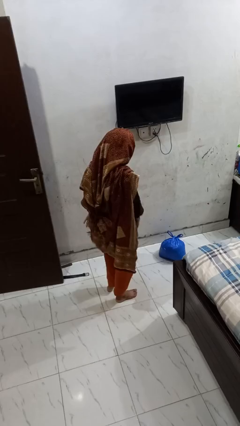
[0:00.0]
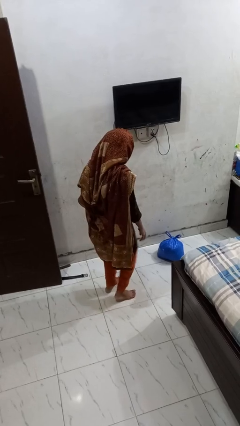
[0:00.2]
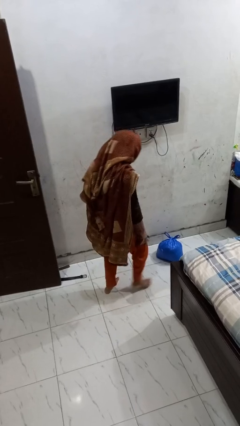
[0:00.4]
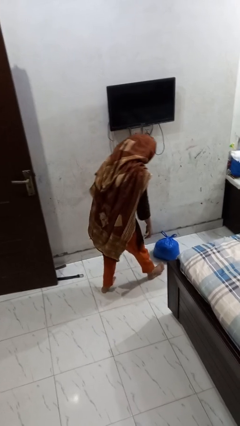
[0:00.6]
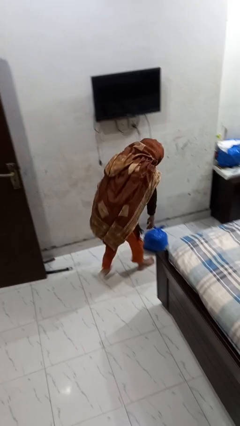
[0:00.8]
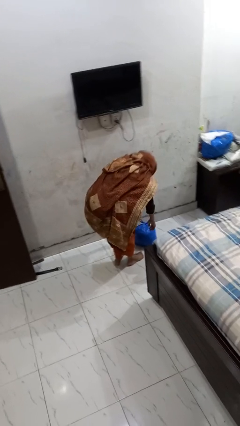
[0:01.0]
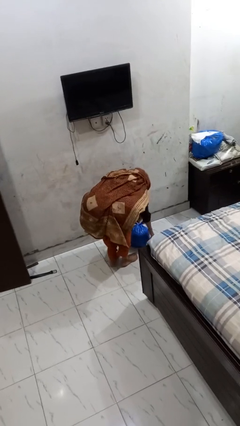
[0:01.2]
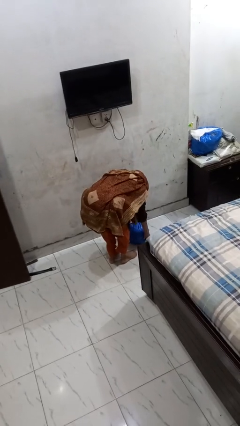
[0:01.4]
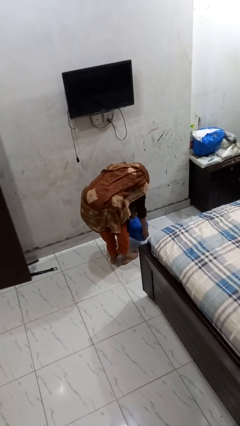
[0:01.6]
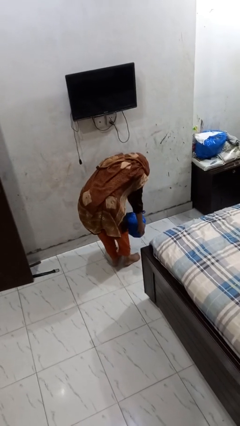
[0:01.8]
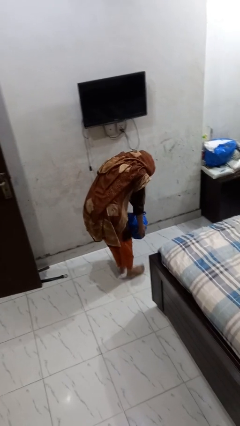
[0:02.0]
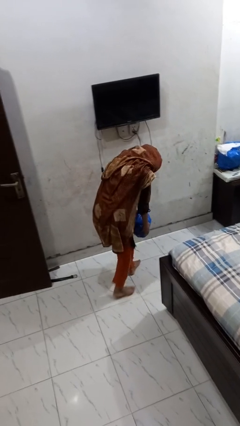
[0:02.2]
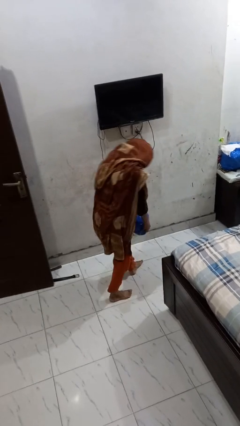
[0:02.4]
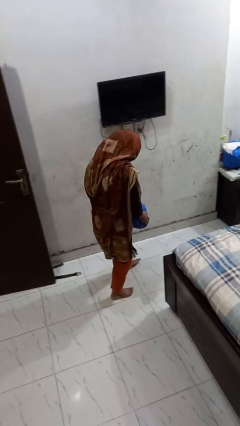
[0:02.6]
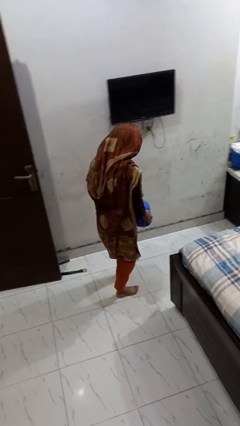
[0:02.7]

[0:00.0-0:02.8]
person picks up object from floor

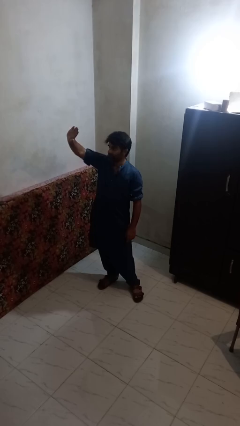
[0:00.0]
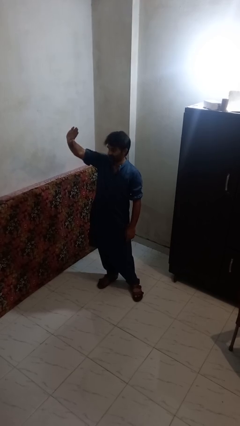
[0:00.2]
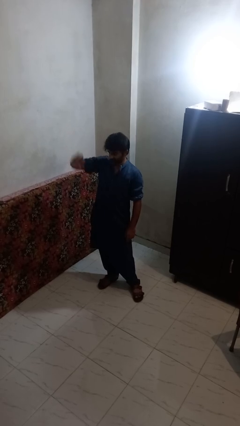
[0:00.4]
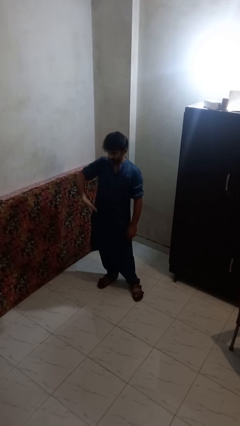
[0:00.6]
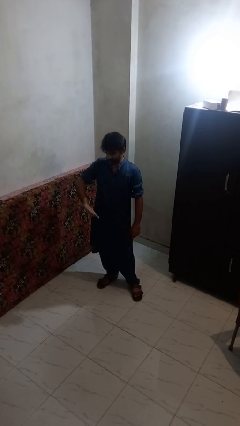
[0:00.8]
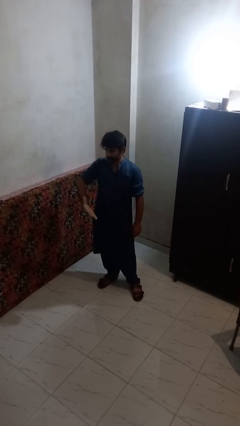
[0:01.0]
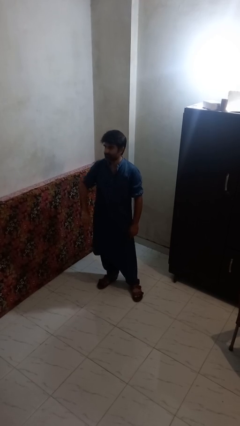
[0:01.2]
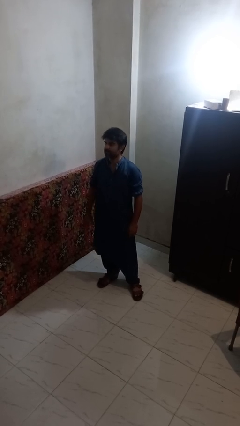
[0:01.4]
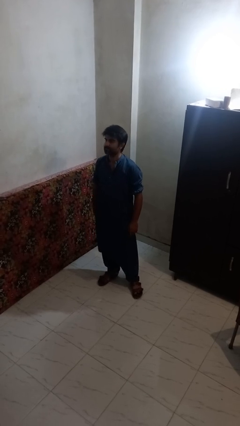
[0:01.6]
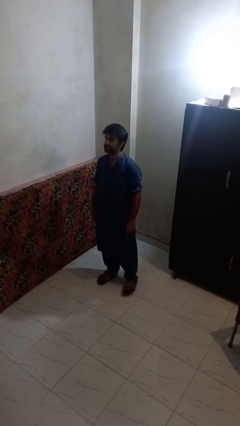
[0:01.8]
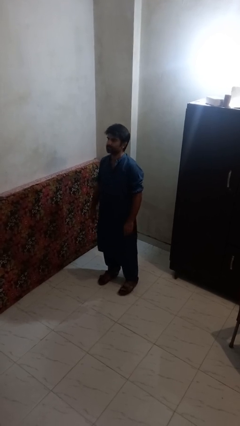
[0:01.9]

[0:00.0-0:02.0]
person gestures swipe down

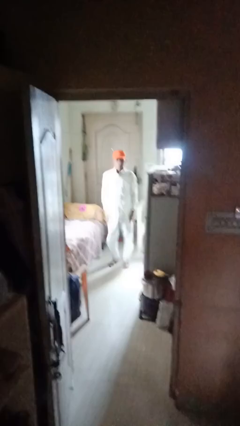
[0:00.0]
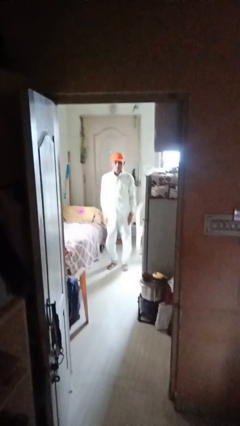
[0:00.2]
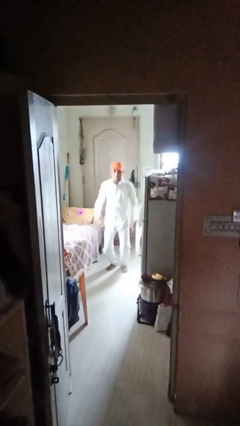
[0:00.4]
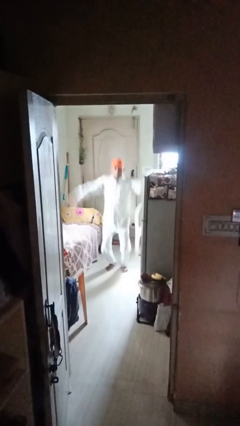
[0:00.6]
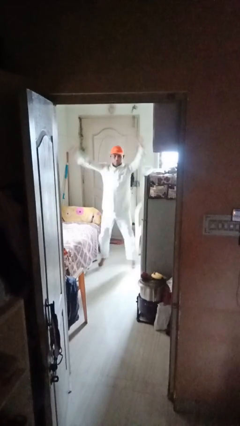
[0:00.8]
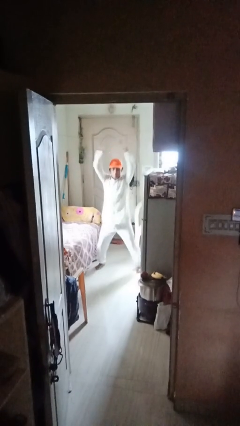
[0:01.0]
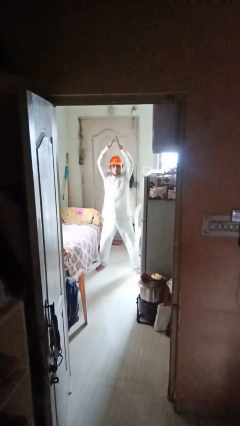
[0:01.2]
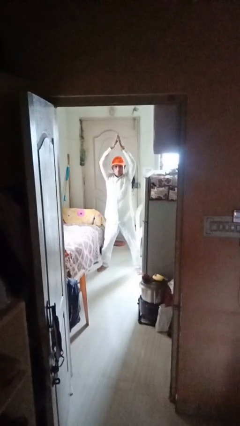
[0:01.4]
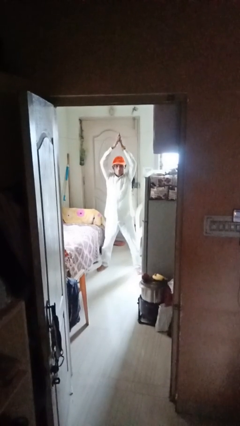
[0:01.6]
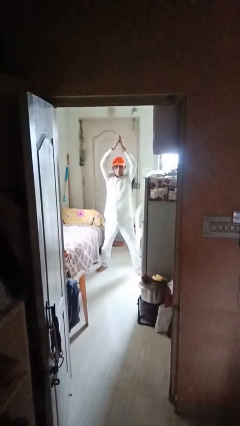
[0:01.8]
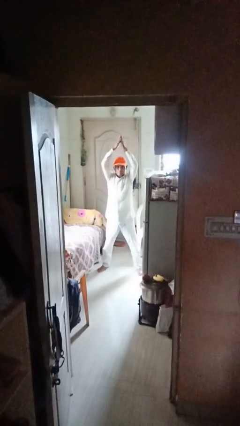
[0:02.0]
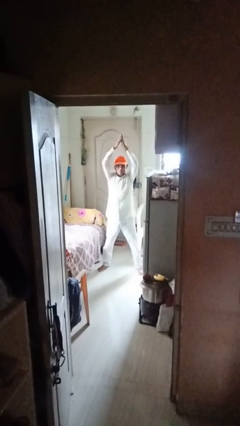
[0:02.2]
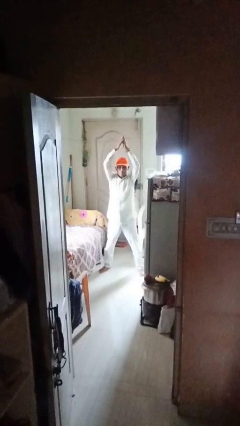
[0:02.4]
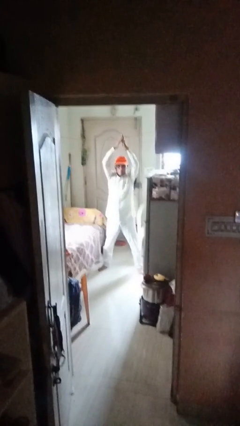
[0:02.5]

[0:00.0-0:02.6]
person exercises with jumping jacks

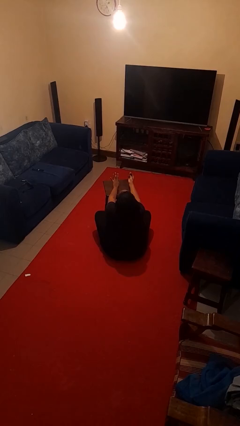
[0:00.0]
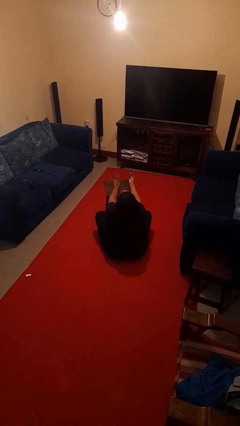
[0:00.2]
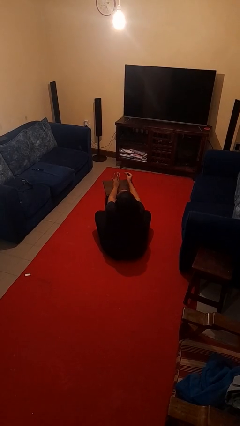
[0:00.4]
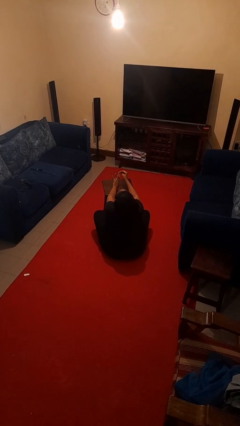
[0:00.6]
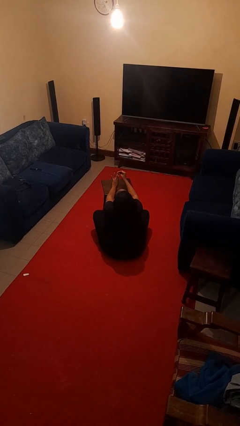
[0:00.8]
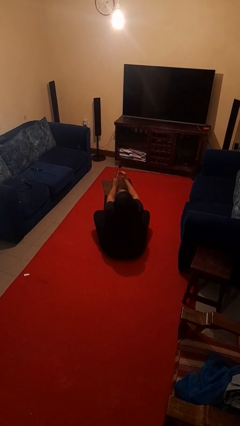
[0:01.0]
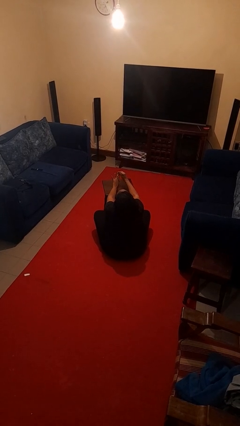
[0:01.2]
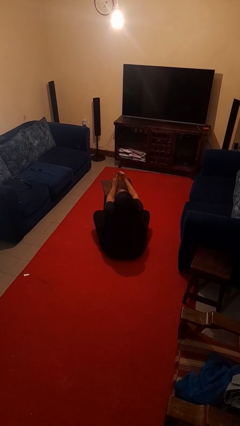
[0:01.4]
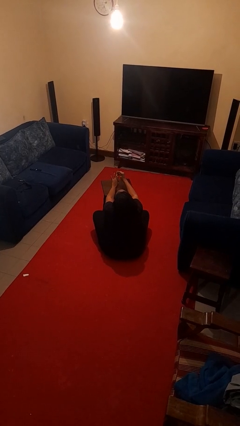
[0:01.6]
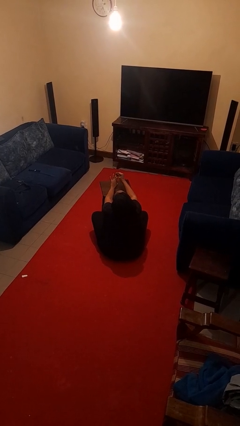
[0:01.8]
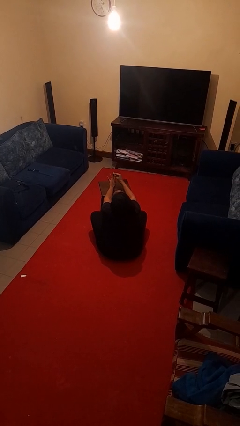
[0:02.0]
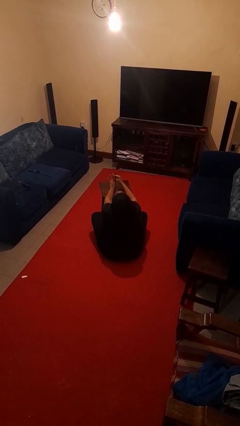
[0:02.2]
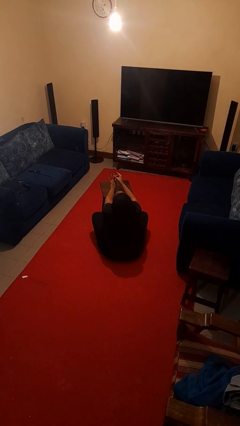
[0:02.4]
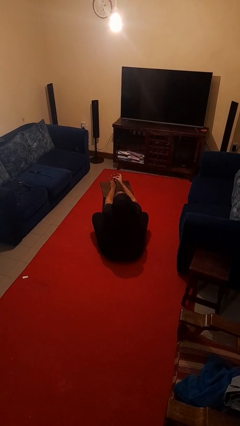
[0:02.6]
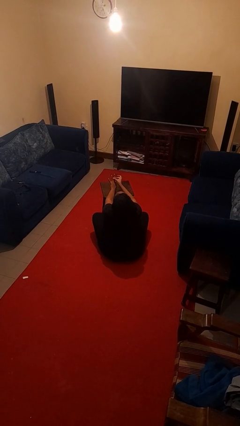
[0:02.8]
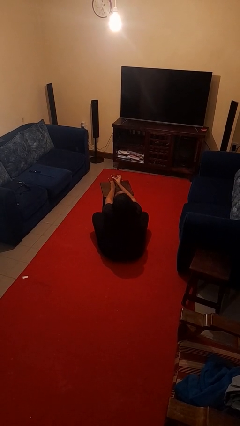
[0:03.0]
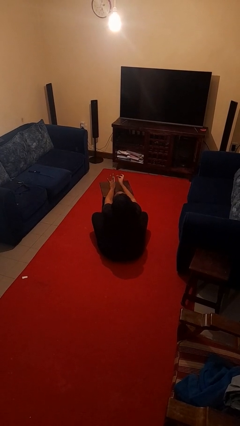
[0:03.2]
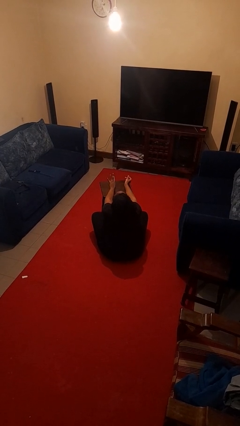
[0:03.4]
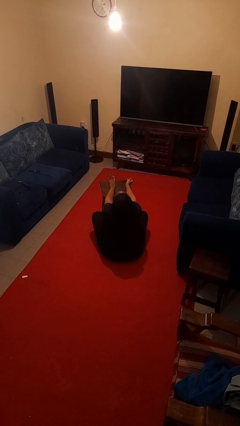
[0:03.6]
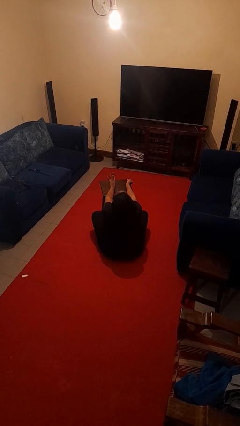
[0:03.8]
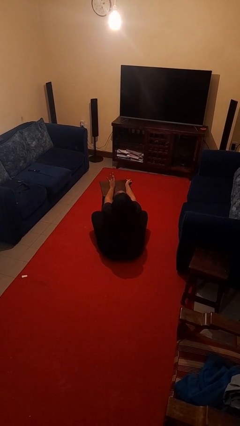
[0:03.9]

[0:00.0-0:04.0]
person puts on ring

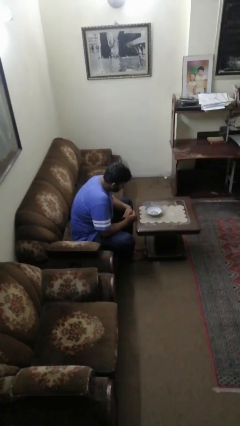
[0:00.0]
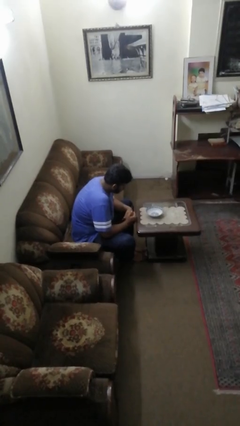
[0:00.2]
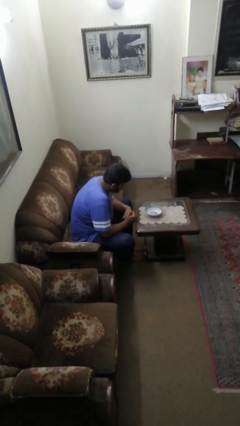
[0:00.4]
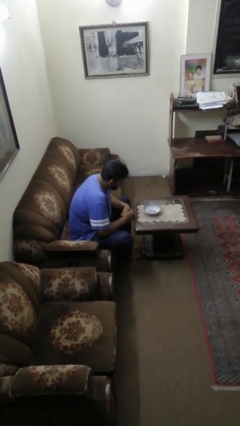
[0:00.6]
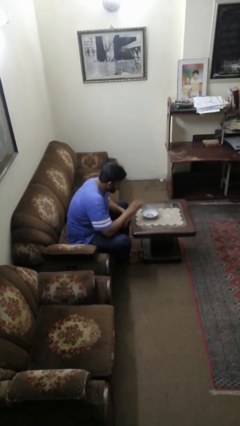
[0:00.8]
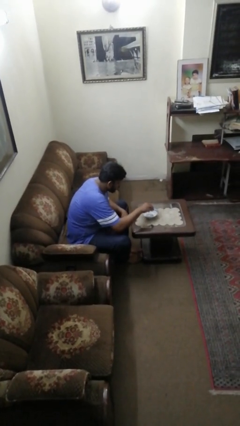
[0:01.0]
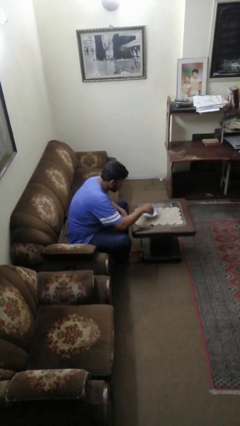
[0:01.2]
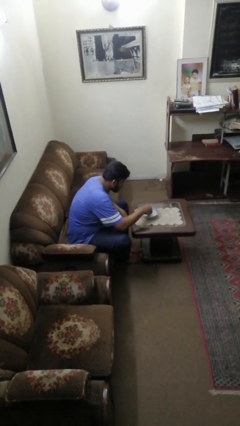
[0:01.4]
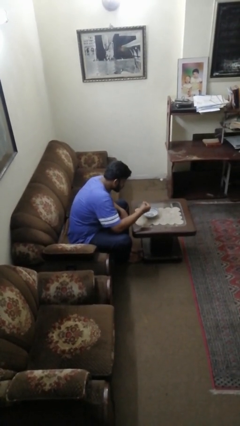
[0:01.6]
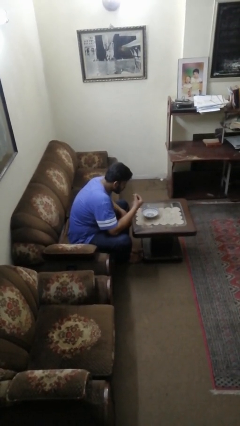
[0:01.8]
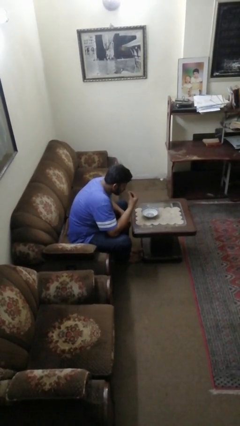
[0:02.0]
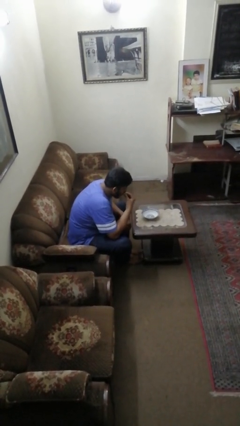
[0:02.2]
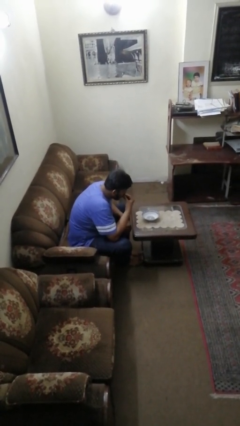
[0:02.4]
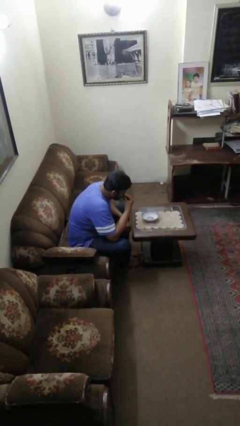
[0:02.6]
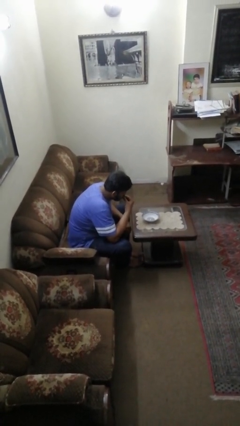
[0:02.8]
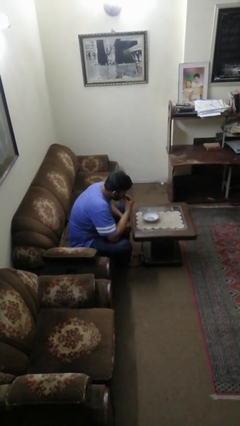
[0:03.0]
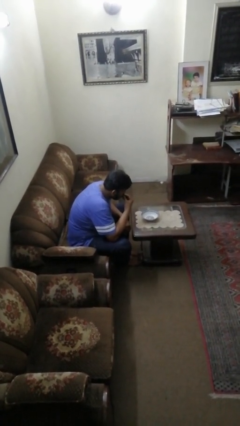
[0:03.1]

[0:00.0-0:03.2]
person eats with hands

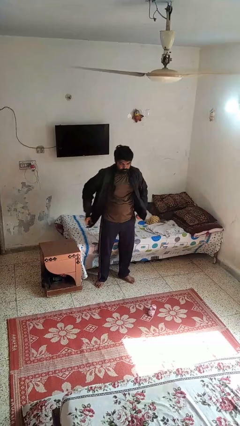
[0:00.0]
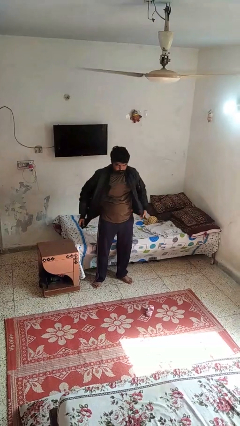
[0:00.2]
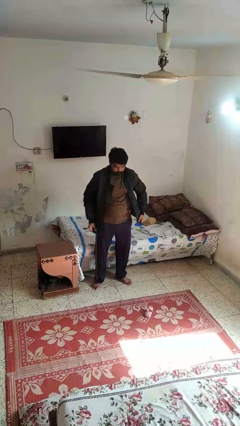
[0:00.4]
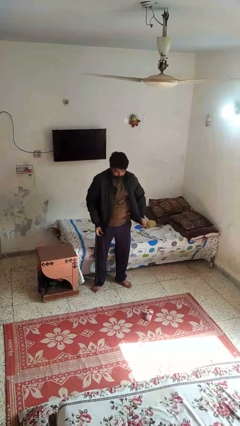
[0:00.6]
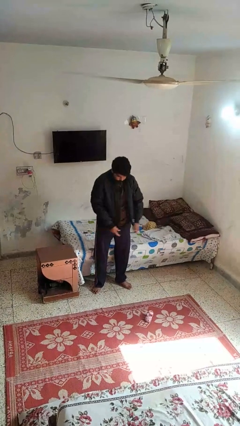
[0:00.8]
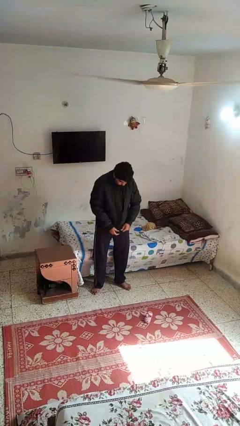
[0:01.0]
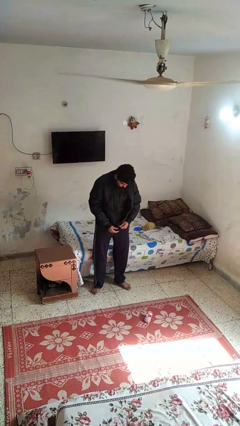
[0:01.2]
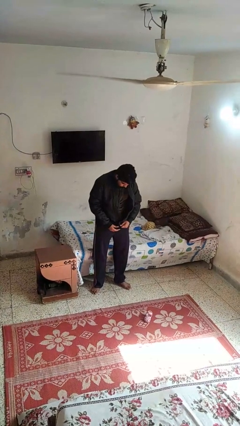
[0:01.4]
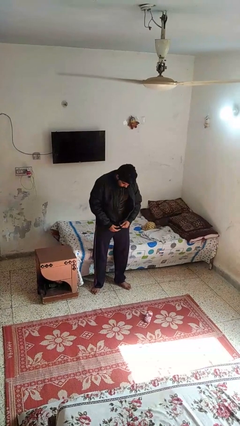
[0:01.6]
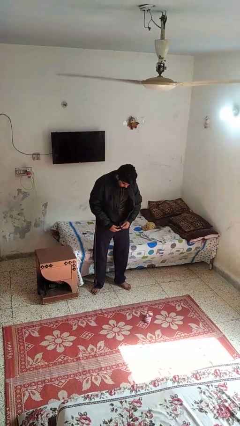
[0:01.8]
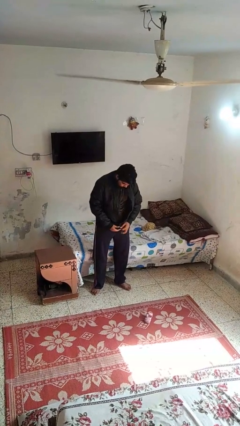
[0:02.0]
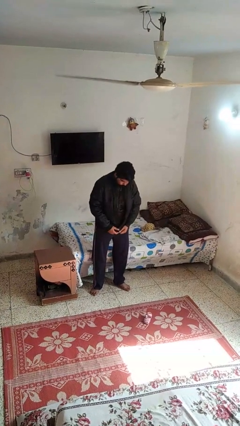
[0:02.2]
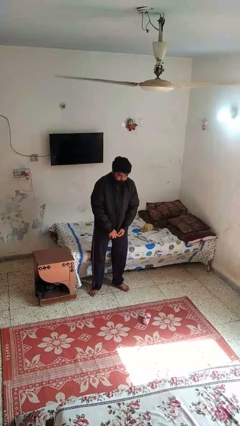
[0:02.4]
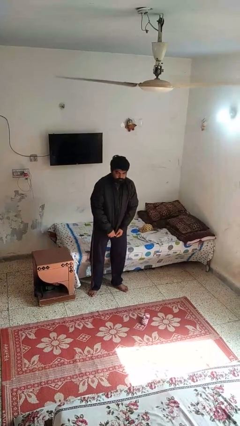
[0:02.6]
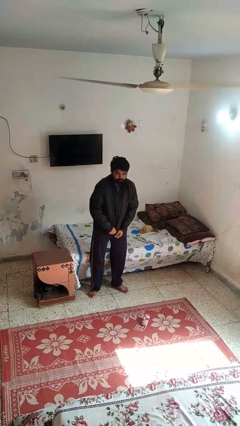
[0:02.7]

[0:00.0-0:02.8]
person zips up jacket
